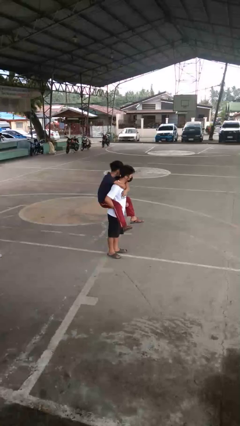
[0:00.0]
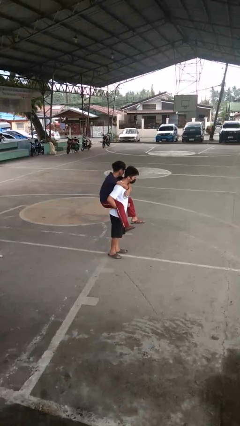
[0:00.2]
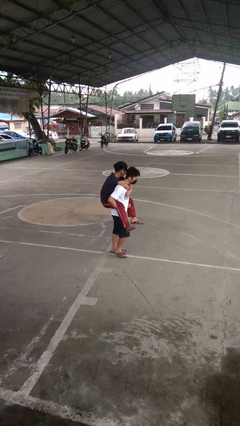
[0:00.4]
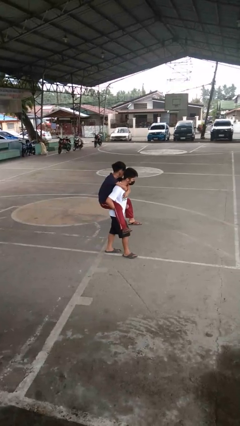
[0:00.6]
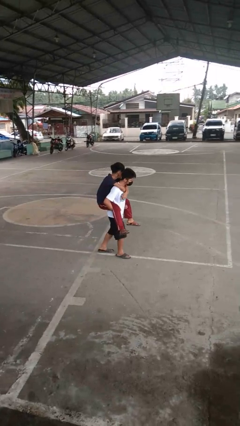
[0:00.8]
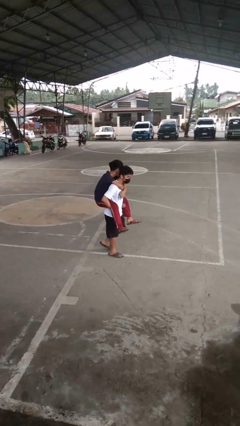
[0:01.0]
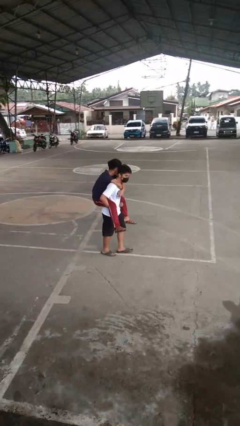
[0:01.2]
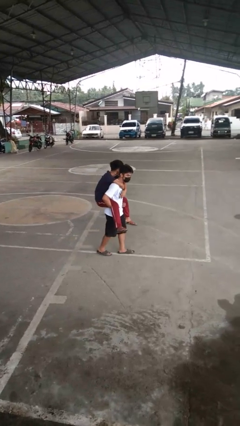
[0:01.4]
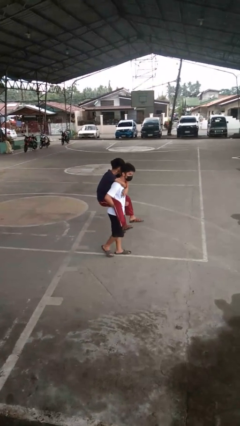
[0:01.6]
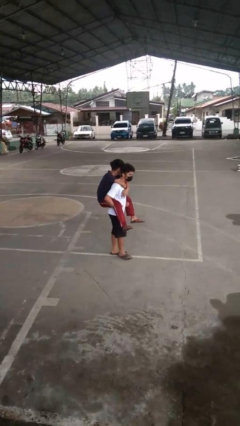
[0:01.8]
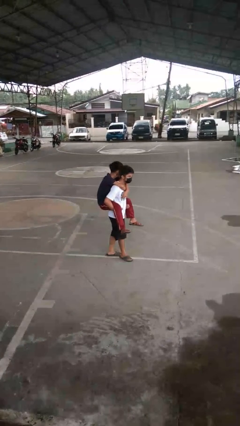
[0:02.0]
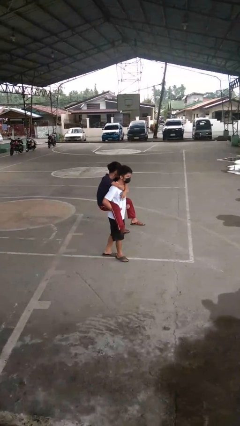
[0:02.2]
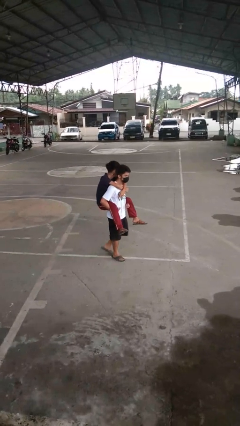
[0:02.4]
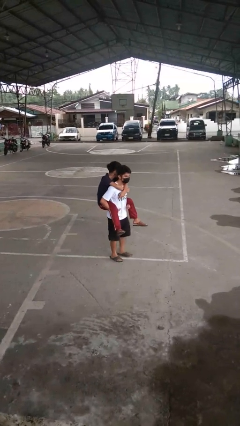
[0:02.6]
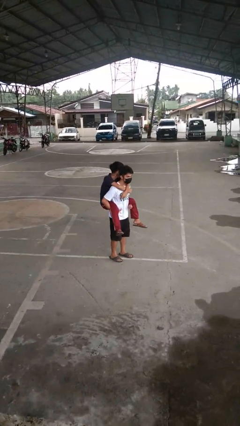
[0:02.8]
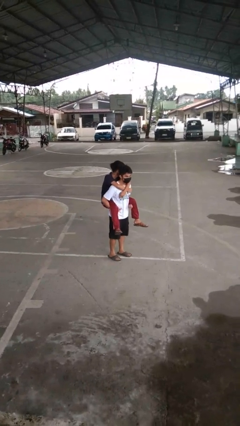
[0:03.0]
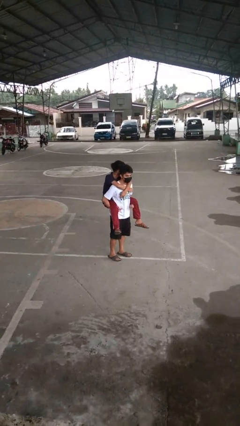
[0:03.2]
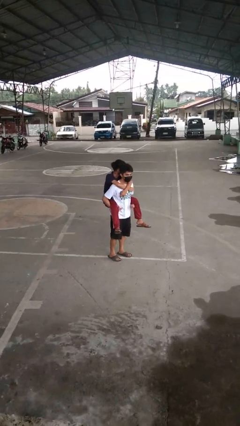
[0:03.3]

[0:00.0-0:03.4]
person carries person on back

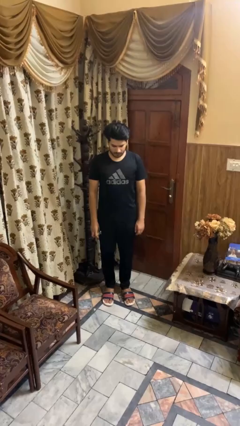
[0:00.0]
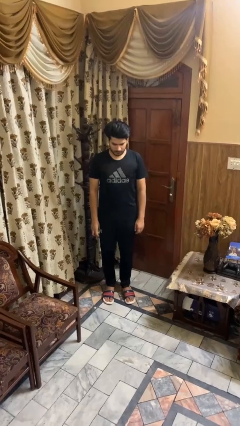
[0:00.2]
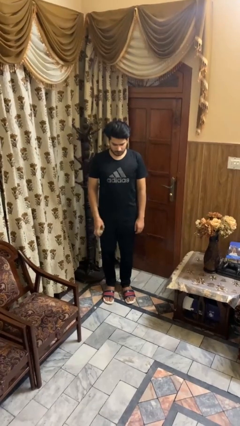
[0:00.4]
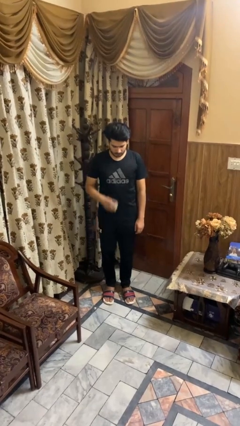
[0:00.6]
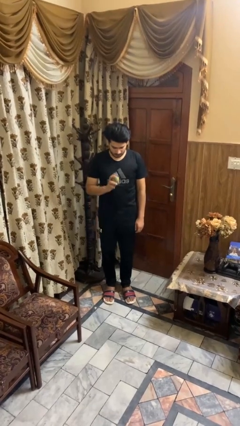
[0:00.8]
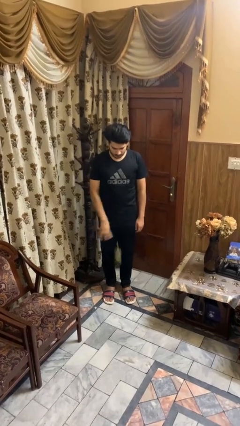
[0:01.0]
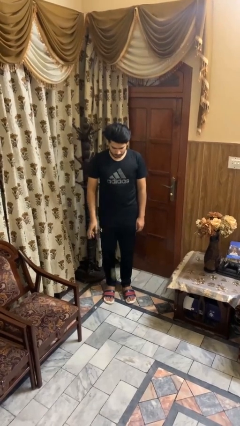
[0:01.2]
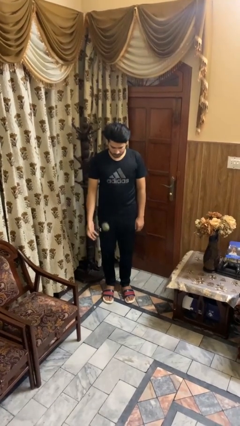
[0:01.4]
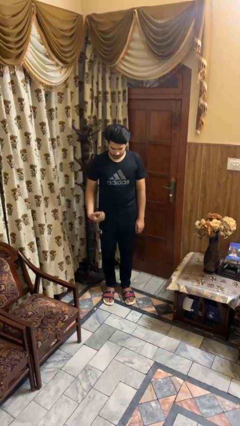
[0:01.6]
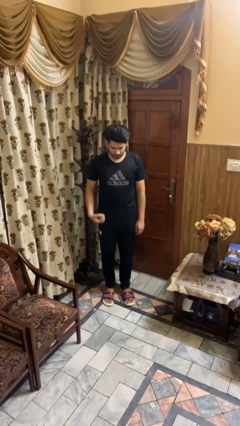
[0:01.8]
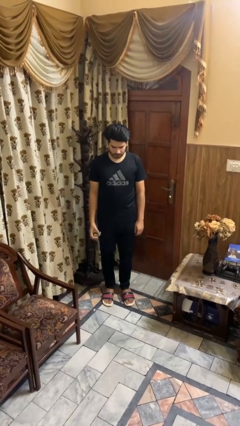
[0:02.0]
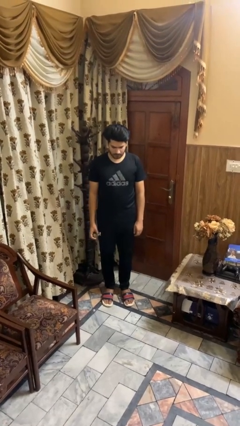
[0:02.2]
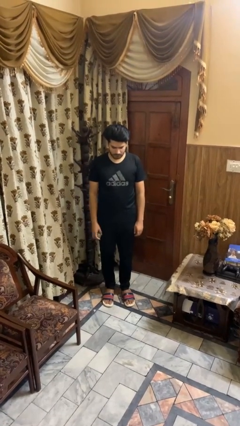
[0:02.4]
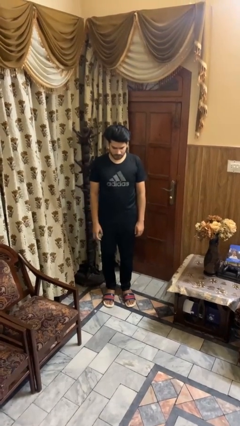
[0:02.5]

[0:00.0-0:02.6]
person bounces ball on floor

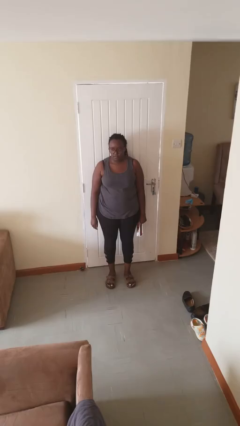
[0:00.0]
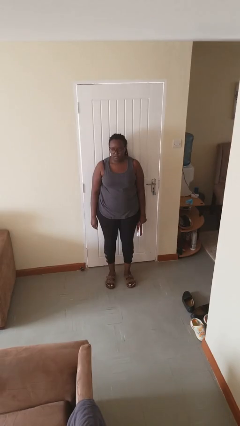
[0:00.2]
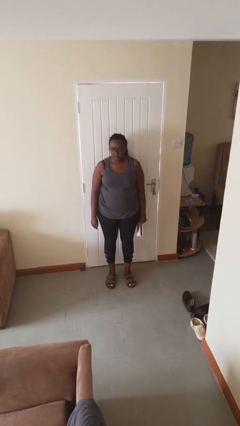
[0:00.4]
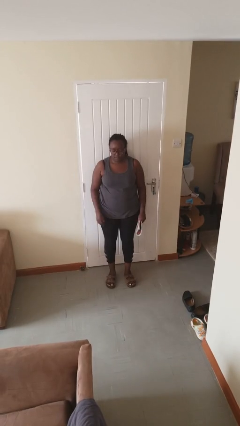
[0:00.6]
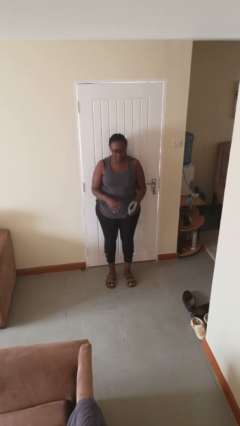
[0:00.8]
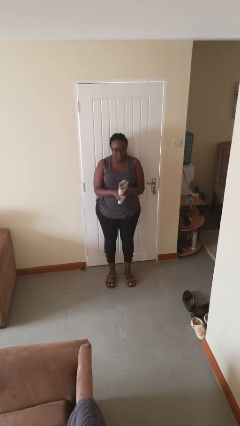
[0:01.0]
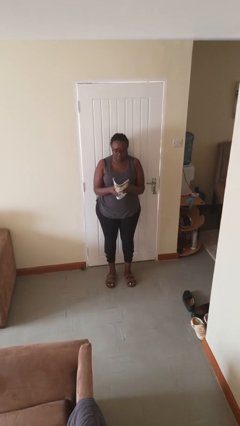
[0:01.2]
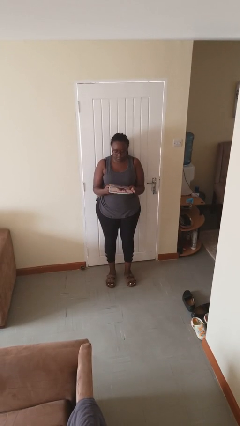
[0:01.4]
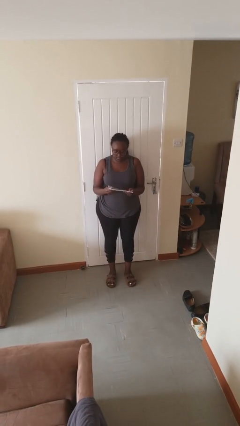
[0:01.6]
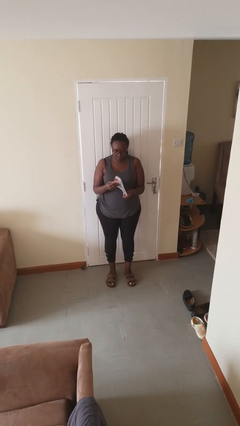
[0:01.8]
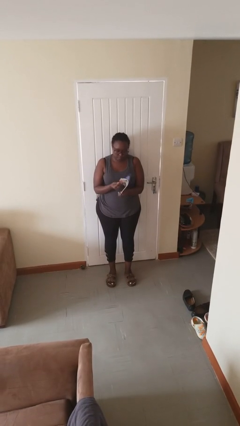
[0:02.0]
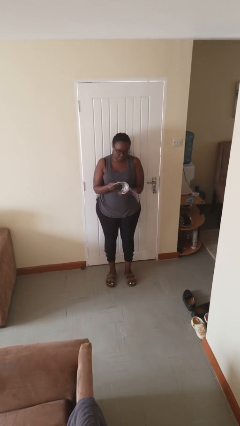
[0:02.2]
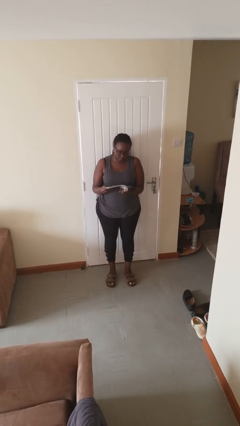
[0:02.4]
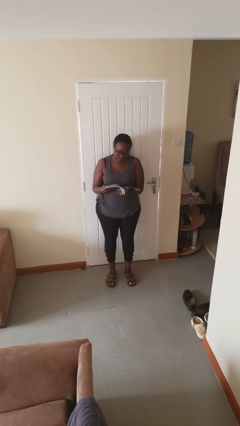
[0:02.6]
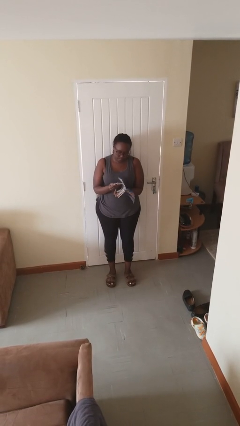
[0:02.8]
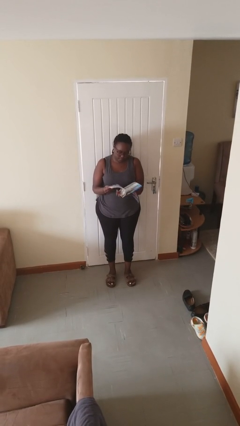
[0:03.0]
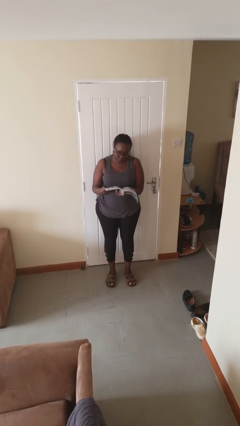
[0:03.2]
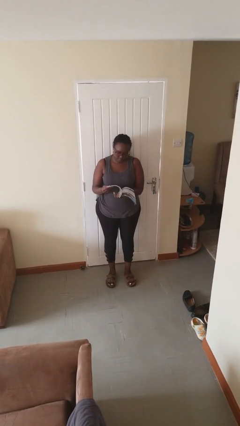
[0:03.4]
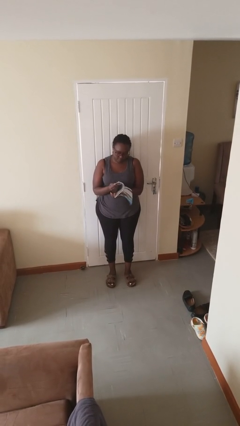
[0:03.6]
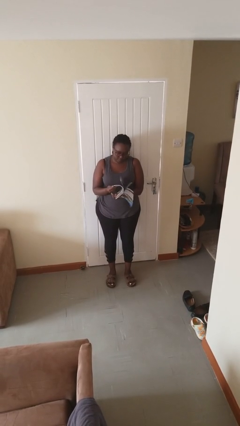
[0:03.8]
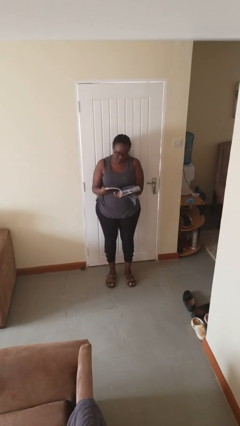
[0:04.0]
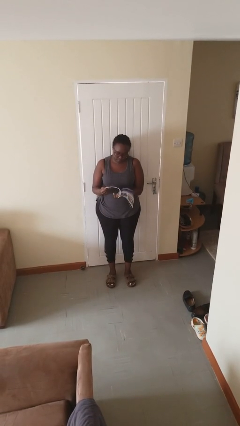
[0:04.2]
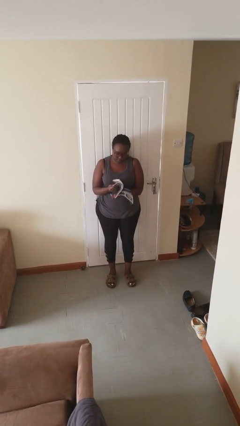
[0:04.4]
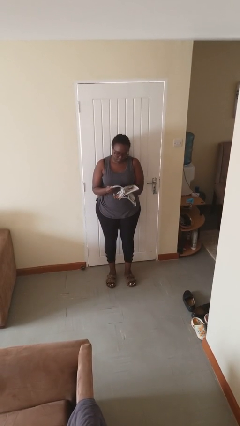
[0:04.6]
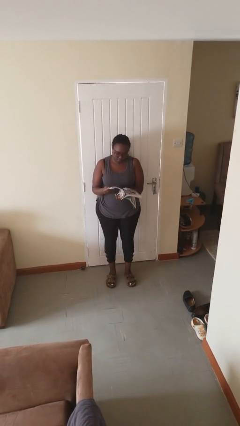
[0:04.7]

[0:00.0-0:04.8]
person reads magazine

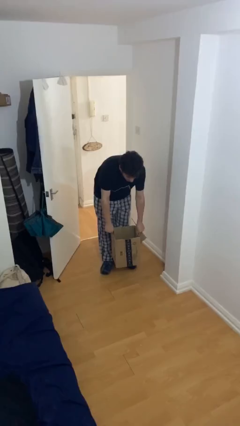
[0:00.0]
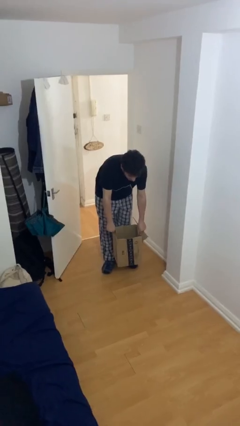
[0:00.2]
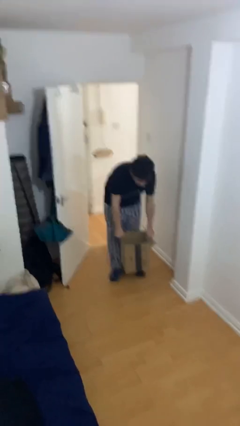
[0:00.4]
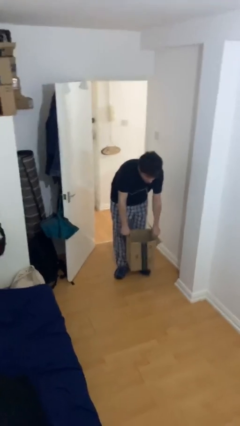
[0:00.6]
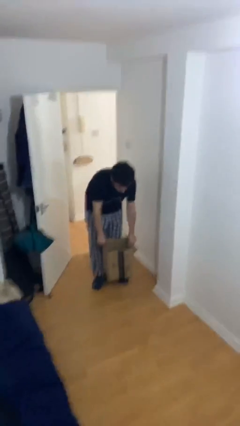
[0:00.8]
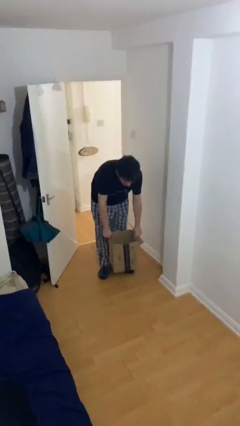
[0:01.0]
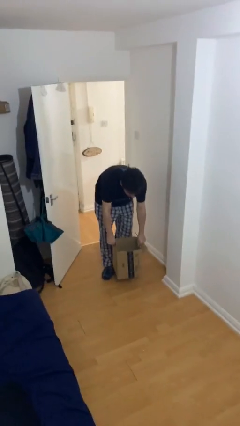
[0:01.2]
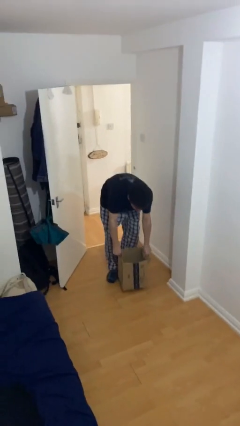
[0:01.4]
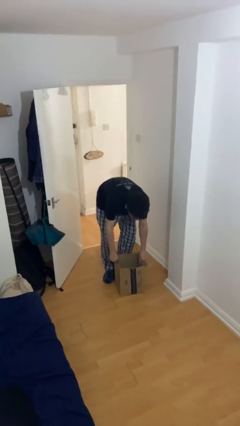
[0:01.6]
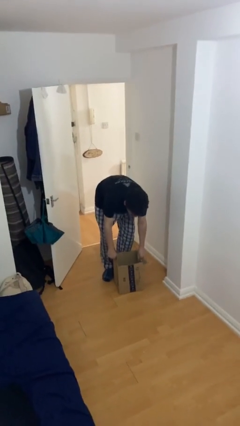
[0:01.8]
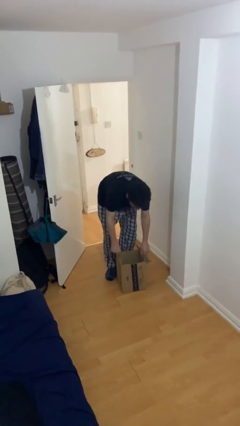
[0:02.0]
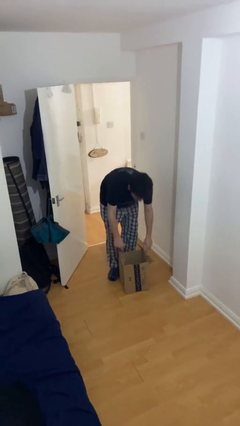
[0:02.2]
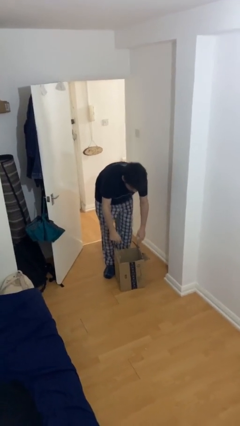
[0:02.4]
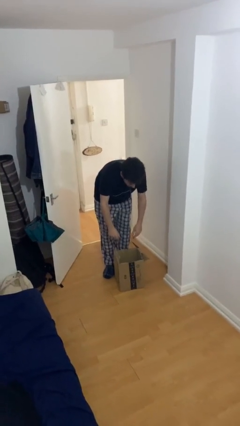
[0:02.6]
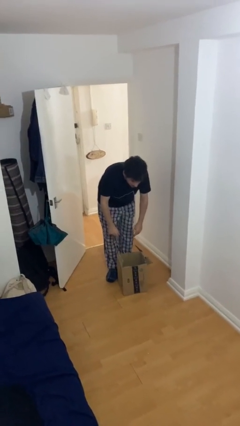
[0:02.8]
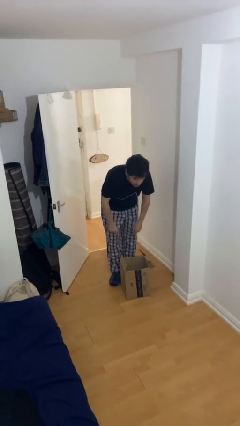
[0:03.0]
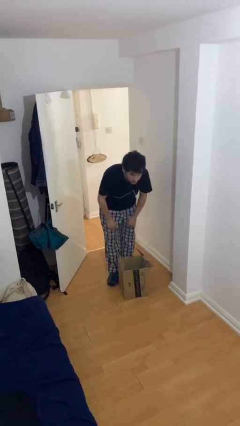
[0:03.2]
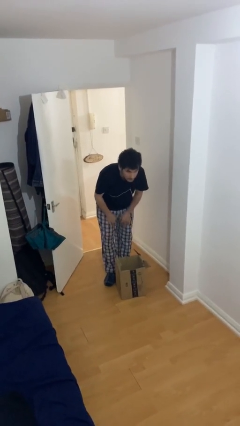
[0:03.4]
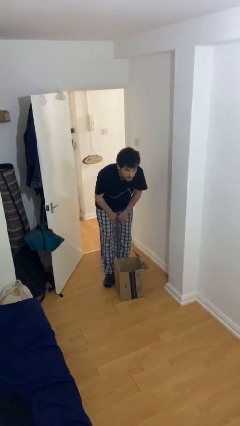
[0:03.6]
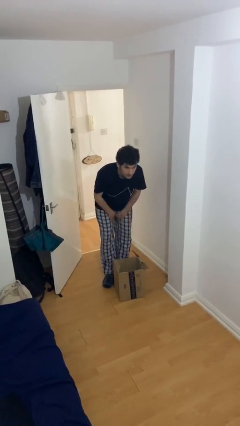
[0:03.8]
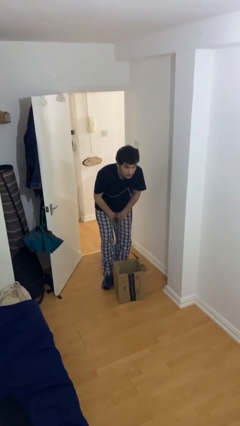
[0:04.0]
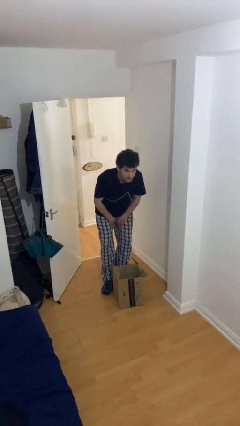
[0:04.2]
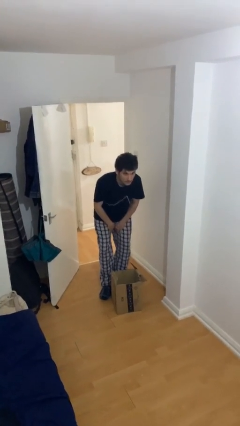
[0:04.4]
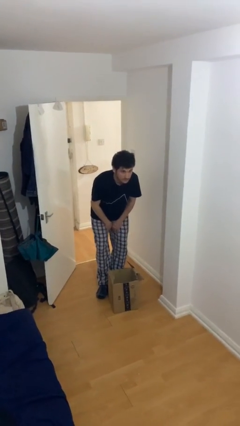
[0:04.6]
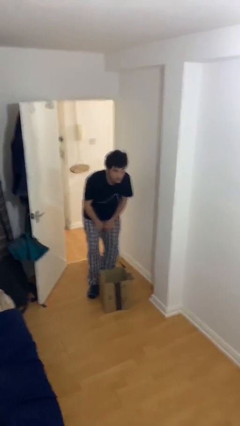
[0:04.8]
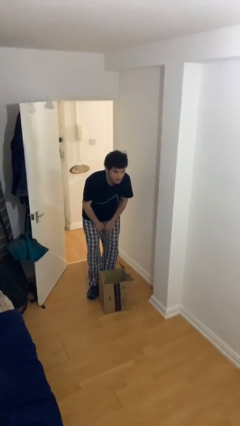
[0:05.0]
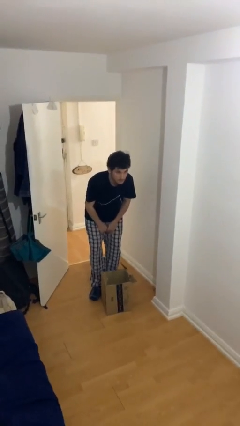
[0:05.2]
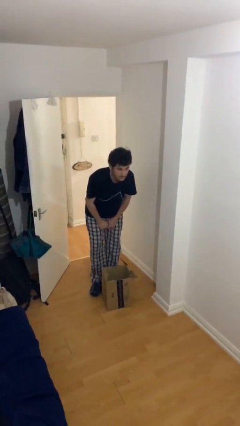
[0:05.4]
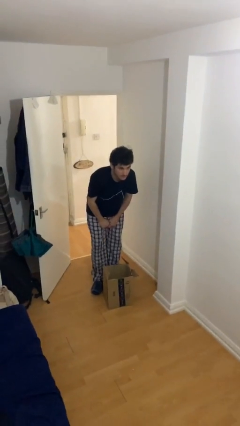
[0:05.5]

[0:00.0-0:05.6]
person puts down object on floor

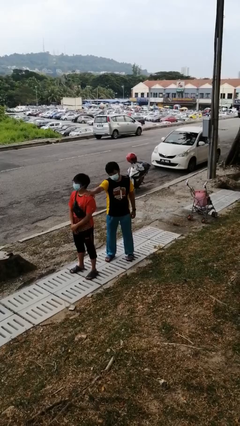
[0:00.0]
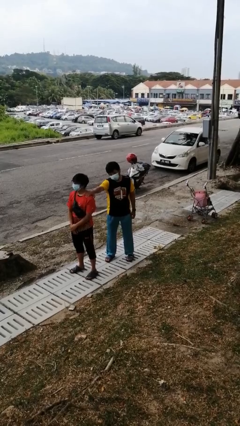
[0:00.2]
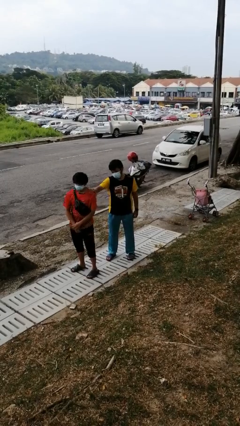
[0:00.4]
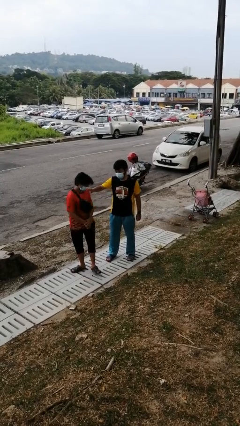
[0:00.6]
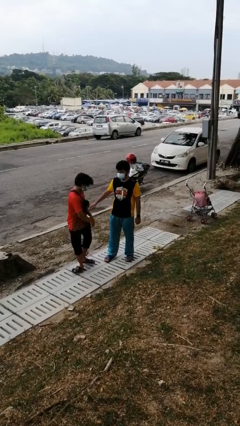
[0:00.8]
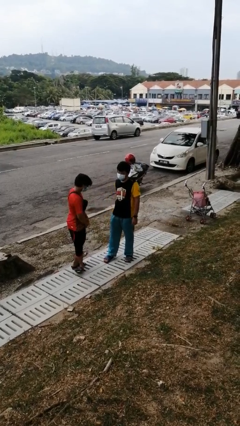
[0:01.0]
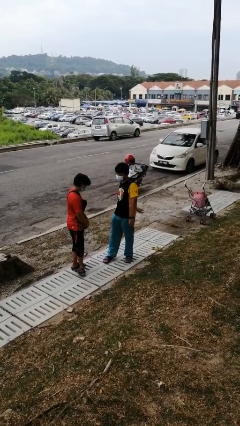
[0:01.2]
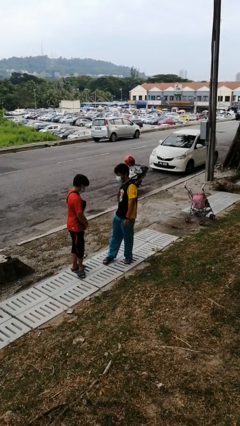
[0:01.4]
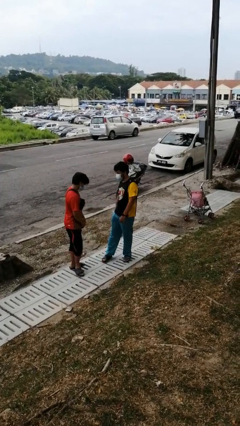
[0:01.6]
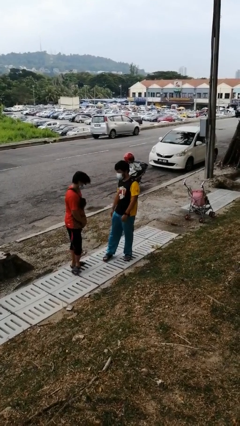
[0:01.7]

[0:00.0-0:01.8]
person spins person around
